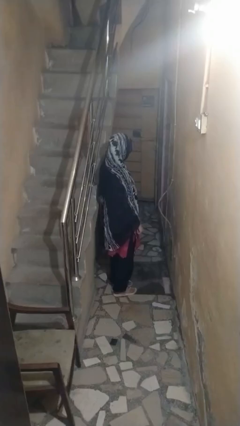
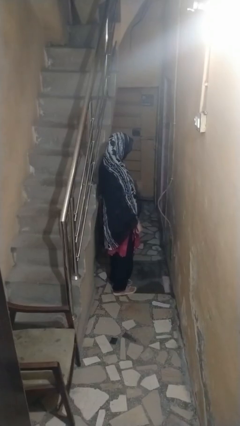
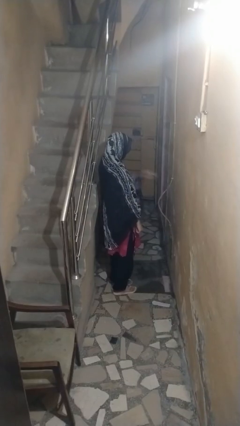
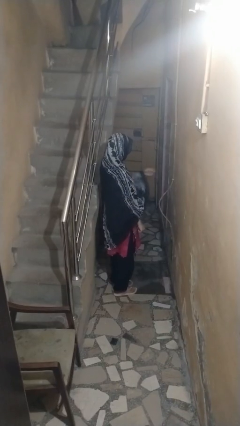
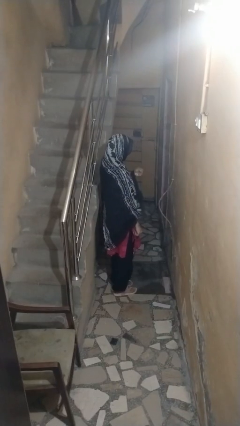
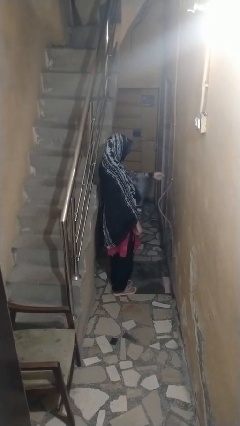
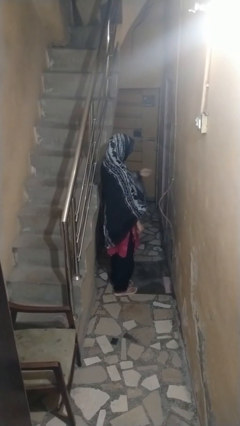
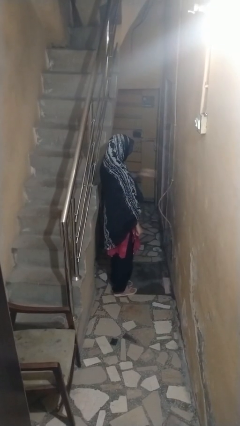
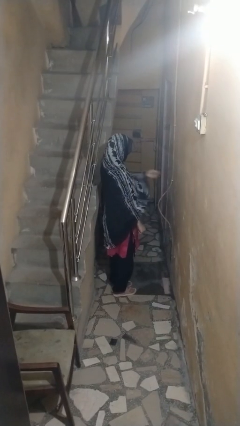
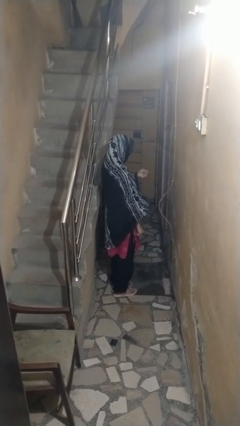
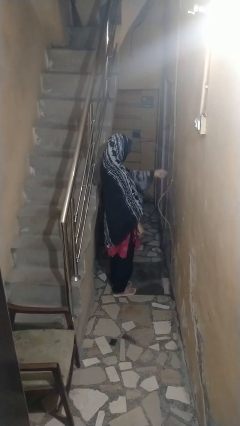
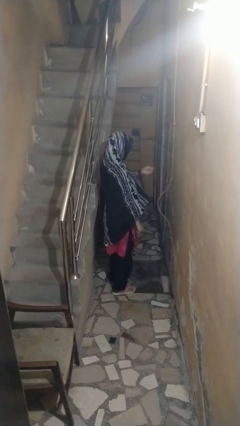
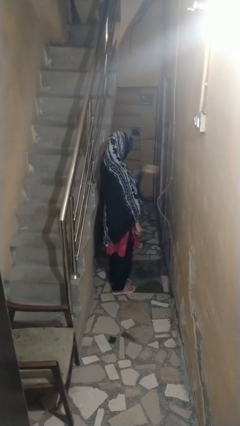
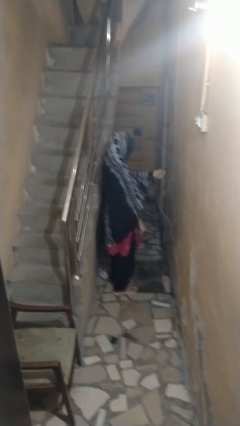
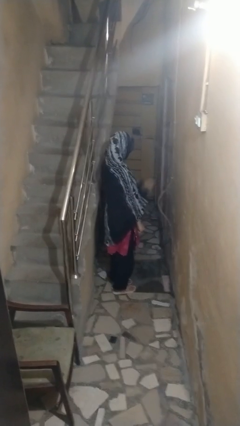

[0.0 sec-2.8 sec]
person punches

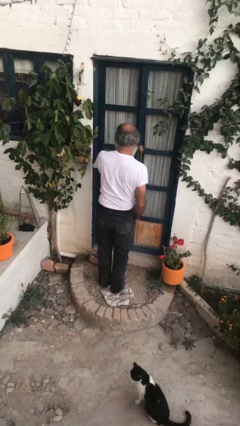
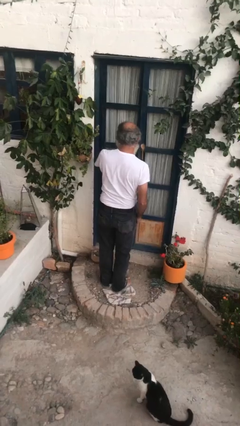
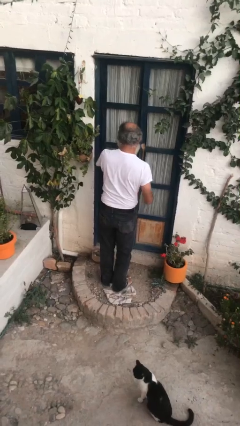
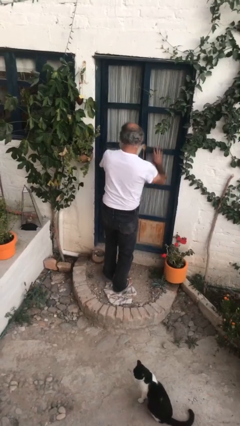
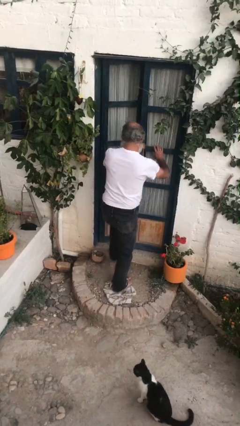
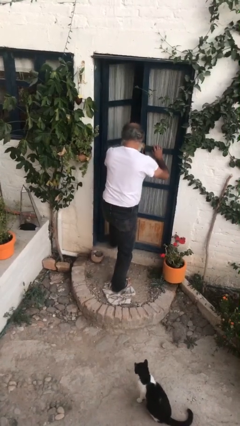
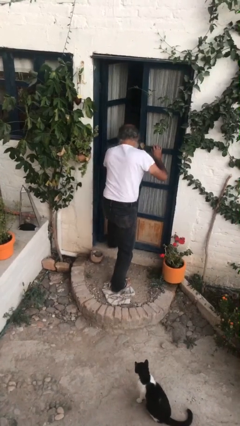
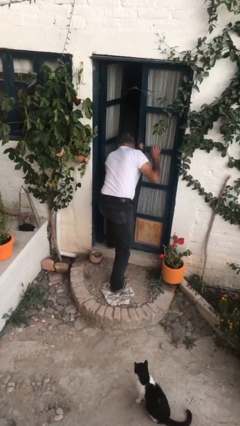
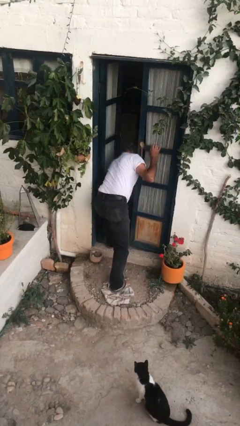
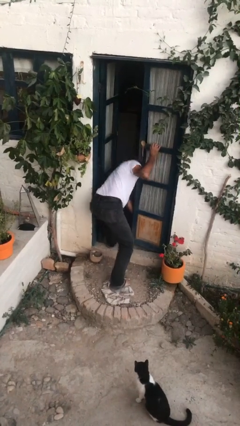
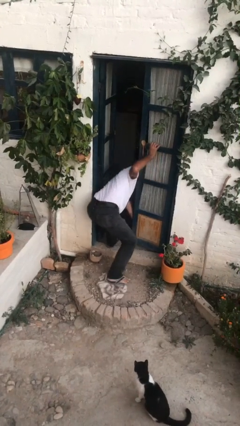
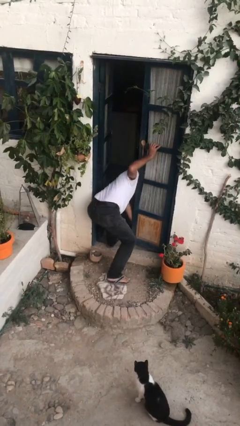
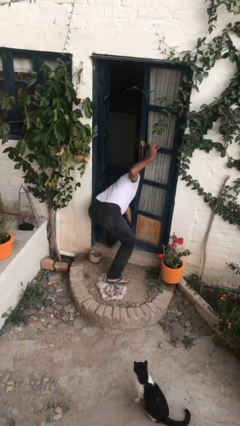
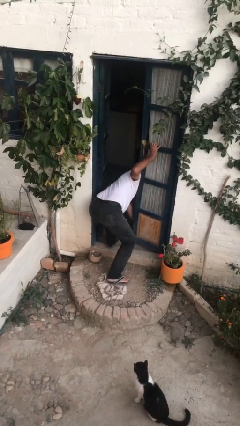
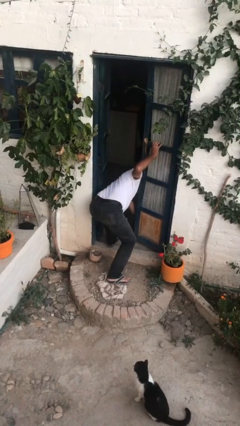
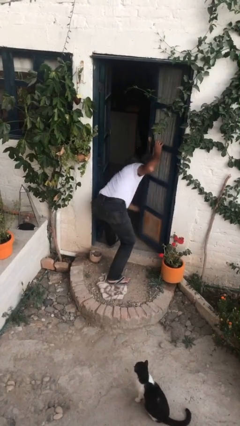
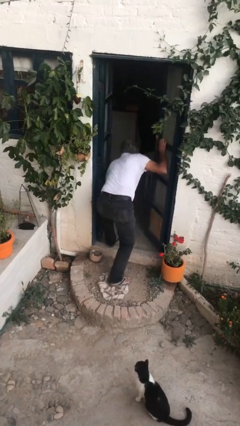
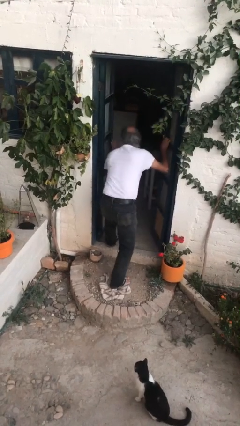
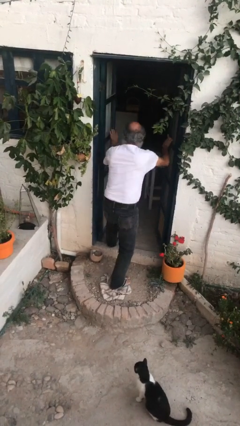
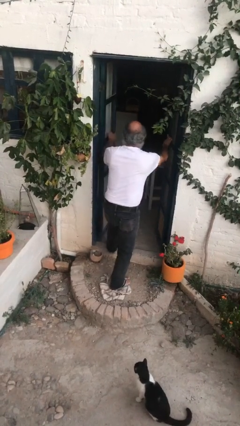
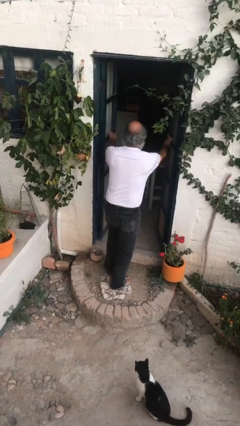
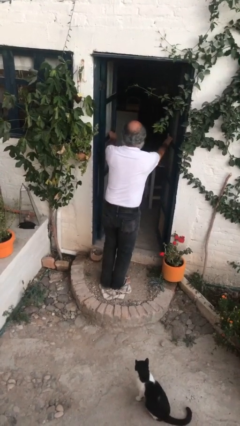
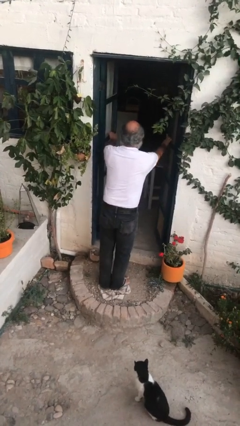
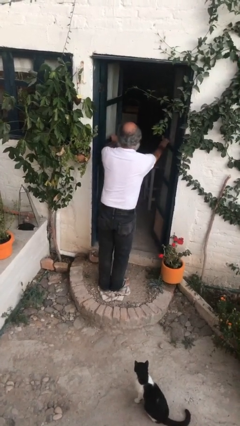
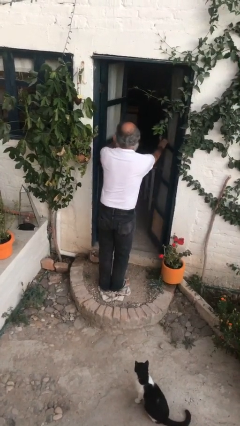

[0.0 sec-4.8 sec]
person opens facility door

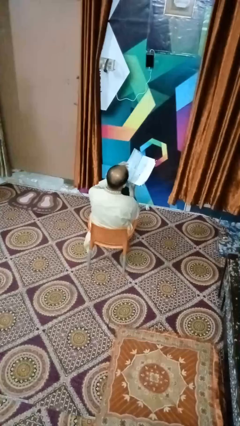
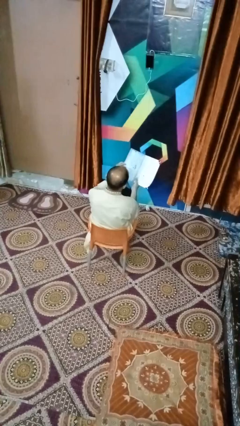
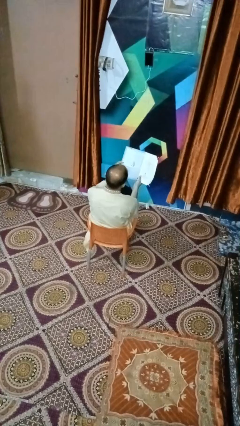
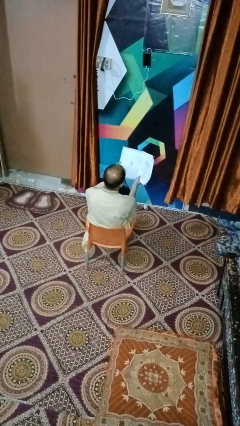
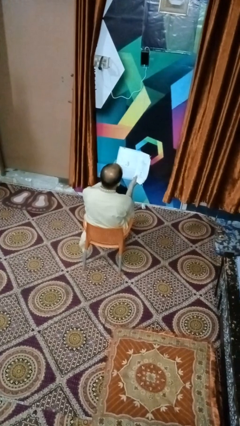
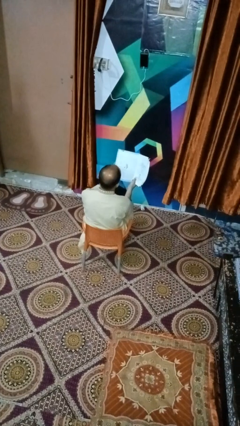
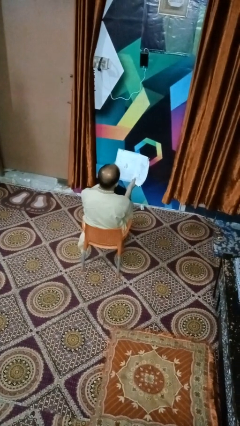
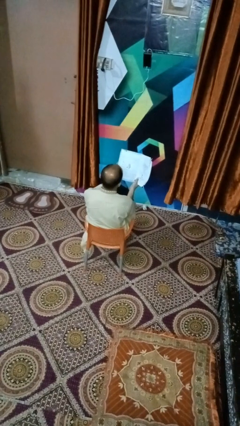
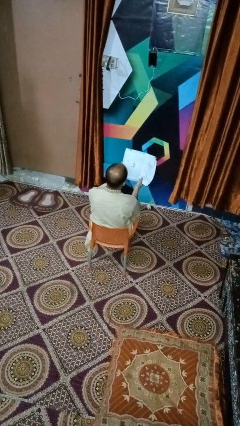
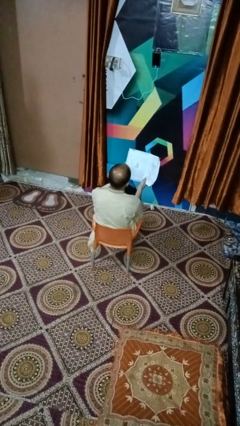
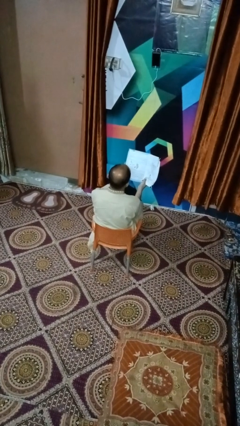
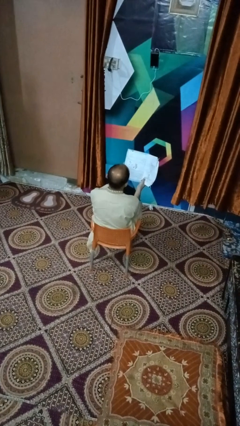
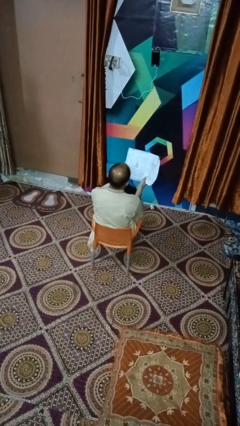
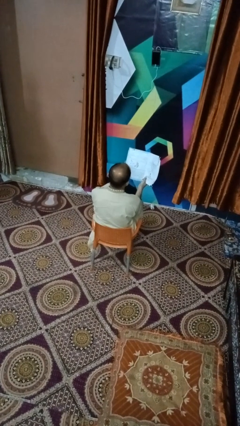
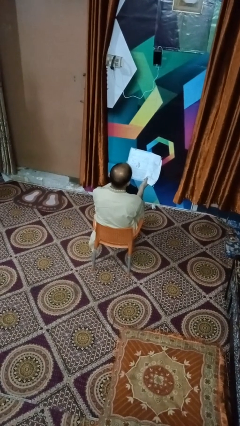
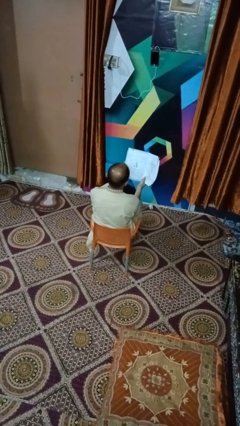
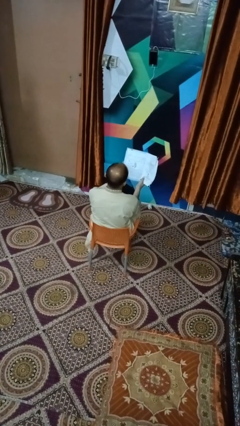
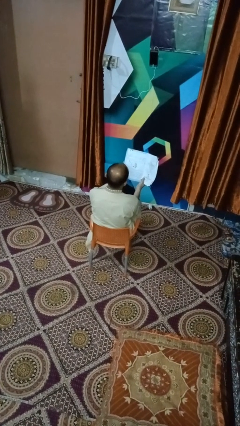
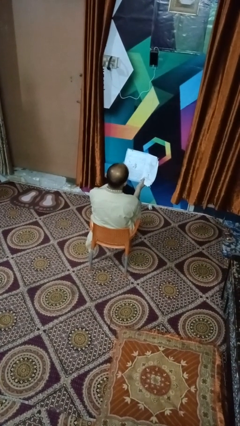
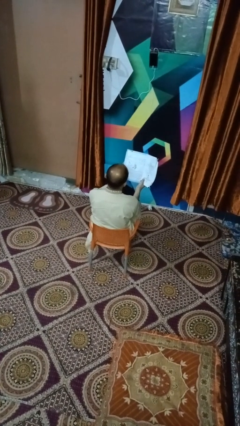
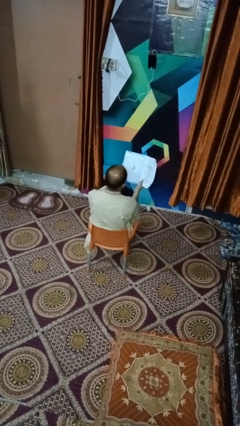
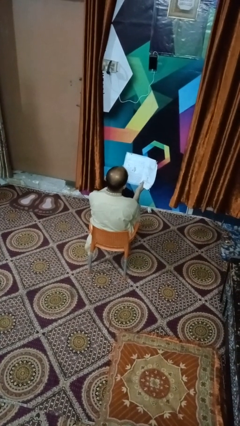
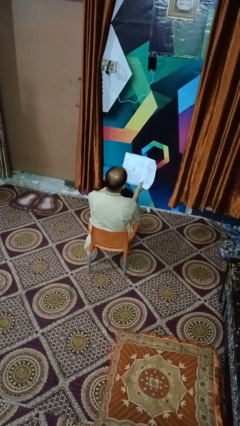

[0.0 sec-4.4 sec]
person reads book

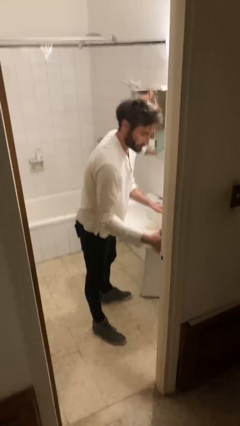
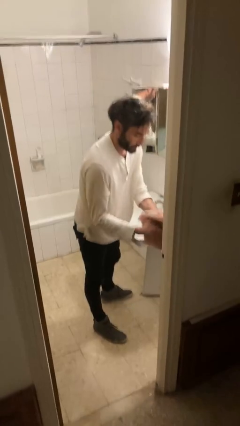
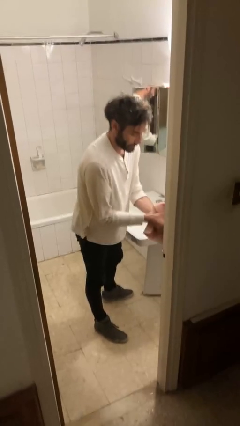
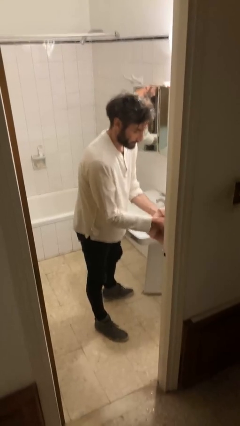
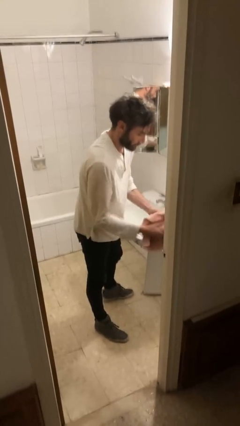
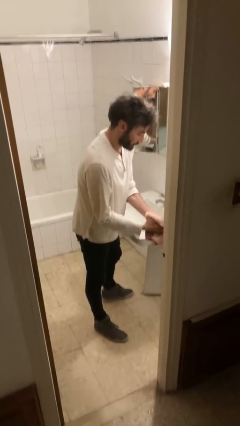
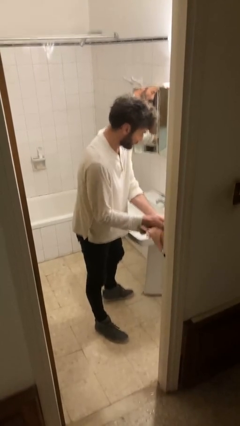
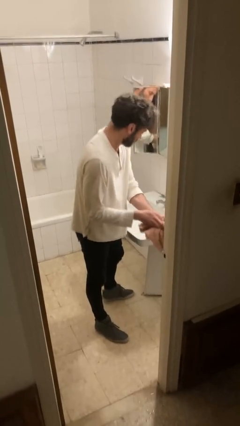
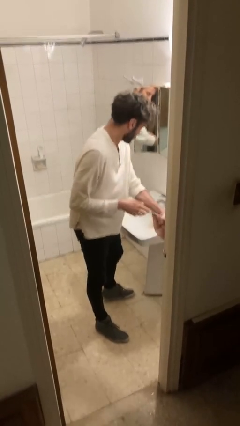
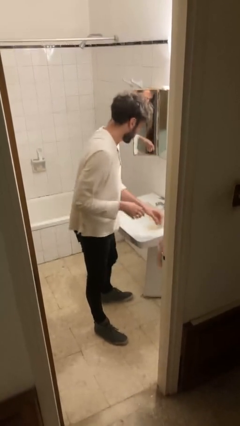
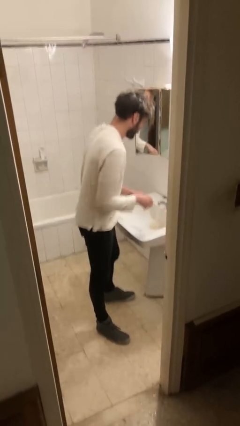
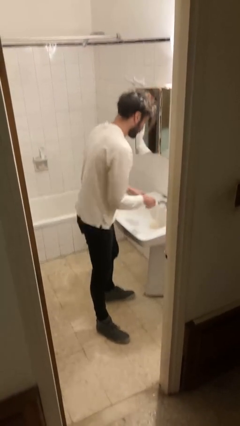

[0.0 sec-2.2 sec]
person dries hands with towel

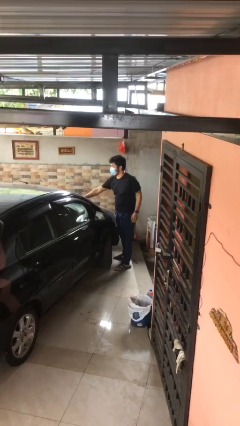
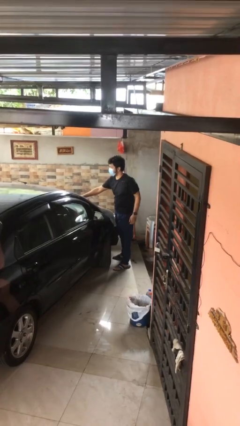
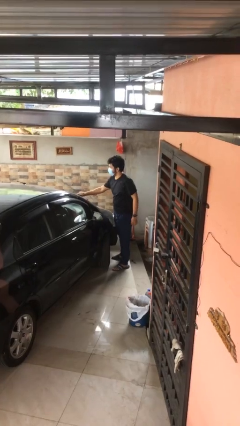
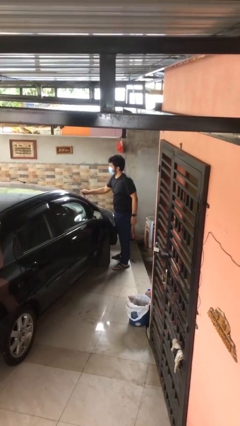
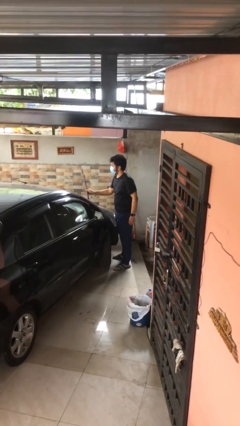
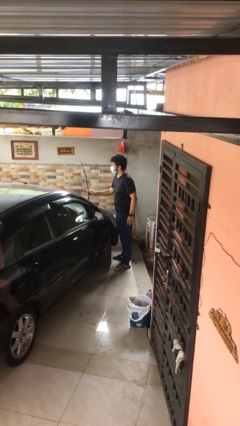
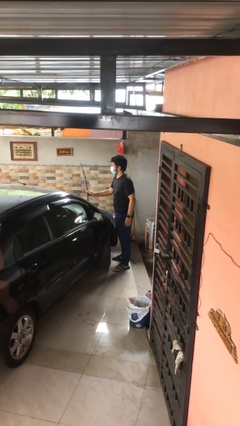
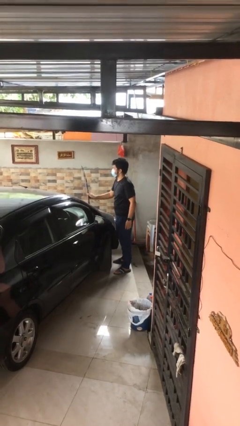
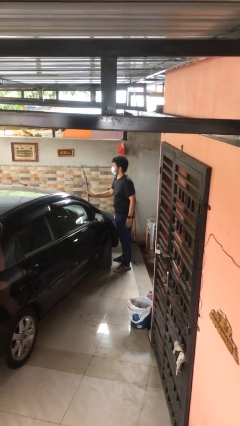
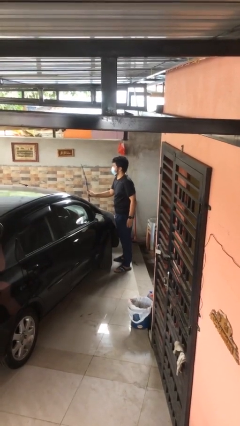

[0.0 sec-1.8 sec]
person flips up car wipers

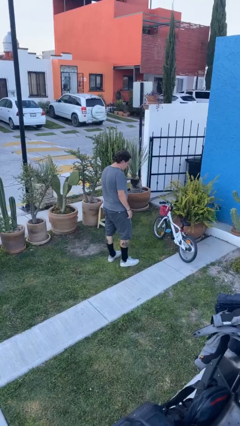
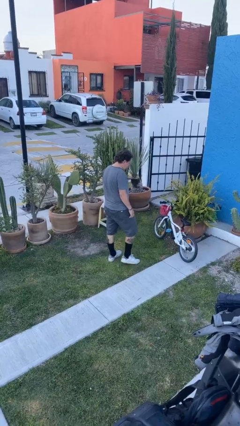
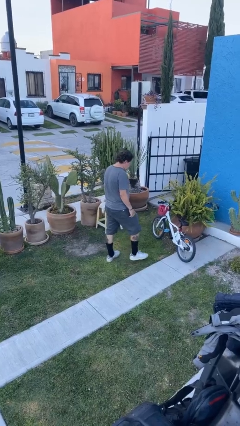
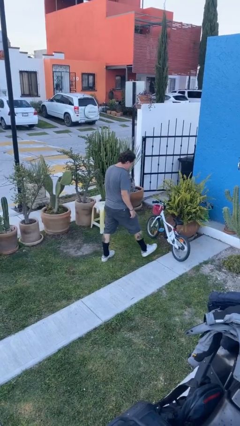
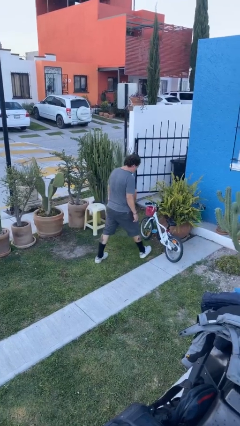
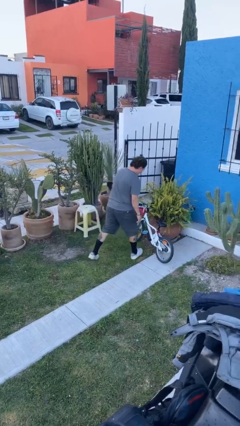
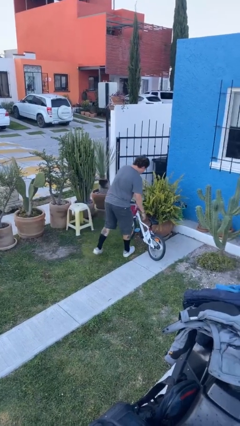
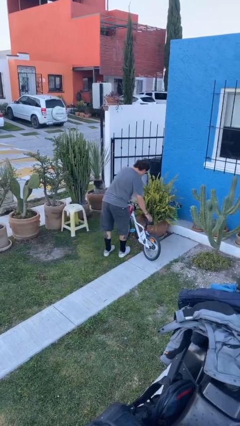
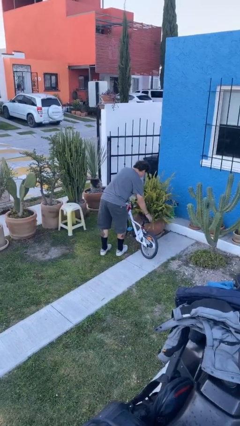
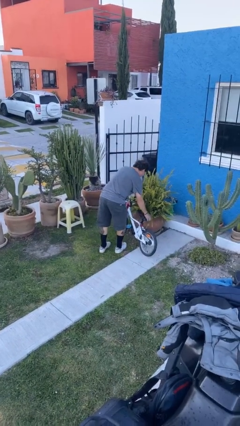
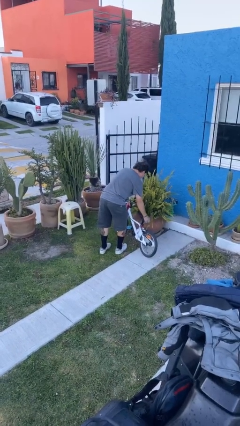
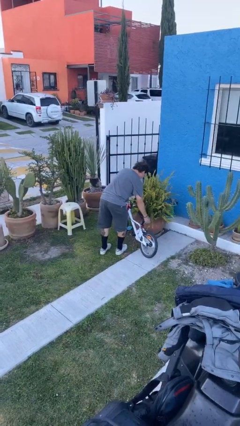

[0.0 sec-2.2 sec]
person picks up object from floor
